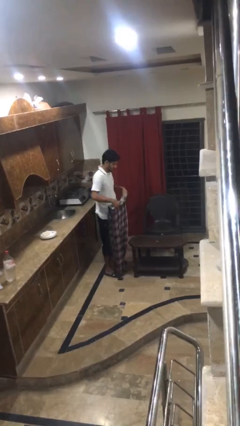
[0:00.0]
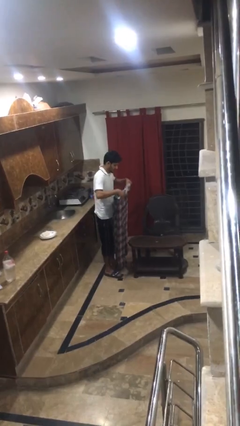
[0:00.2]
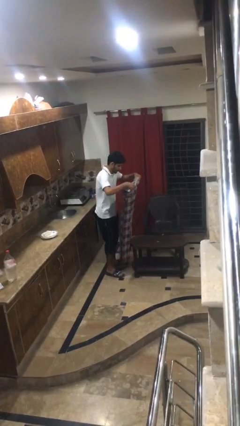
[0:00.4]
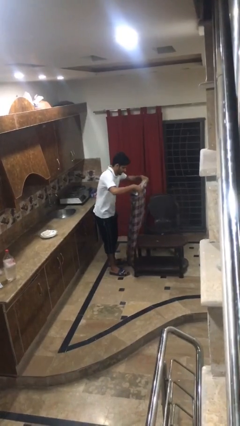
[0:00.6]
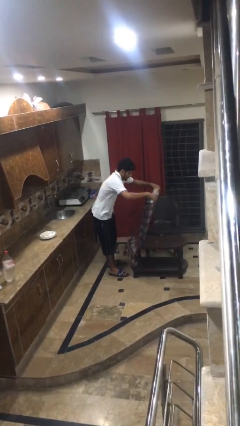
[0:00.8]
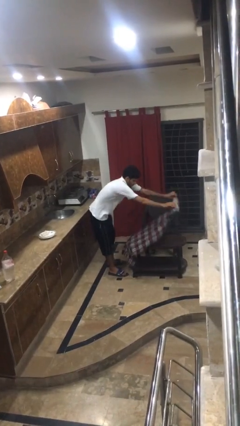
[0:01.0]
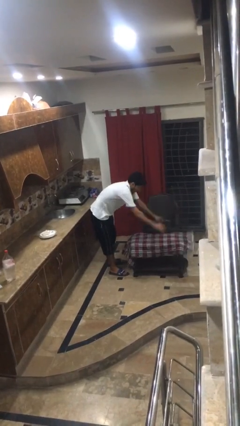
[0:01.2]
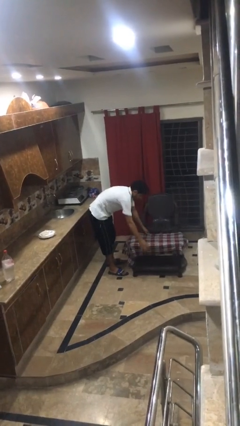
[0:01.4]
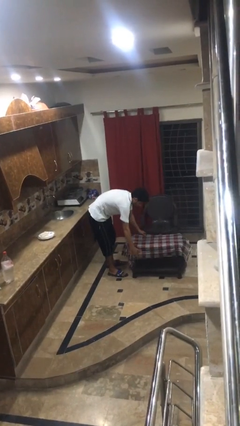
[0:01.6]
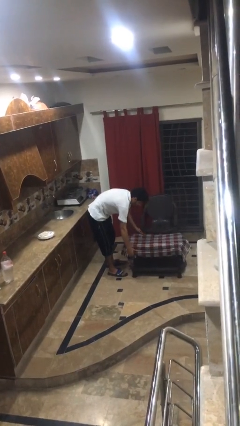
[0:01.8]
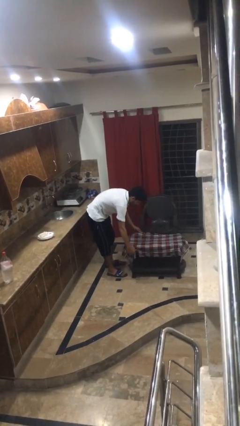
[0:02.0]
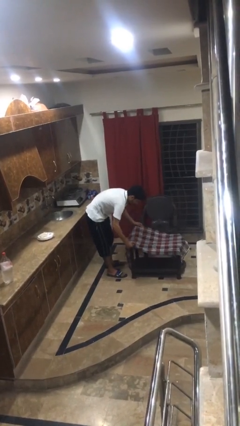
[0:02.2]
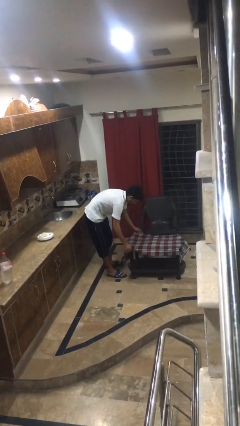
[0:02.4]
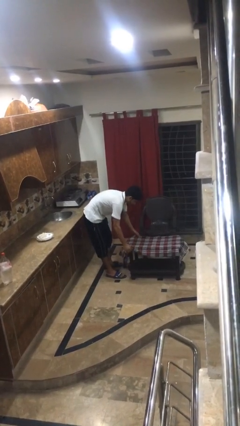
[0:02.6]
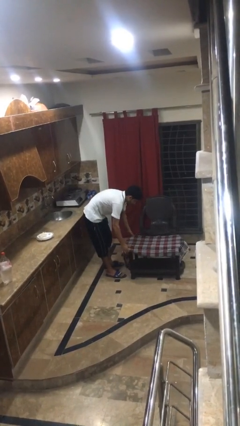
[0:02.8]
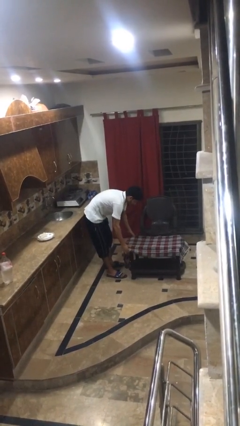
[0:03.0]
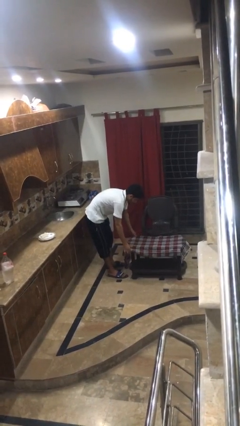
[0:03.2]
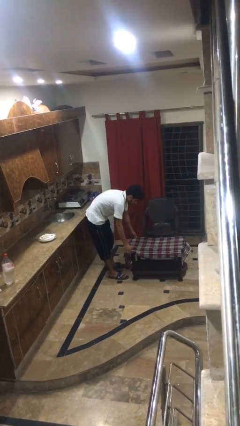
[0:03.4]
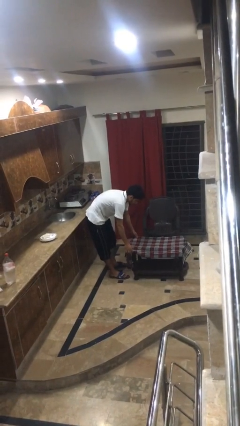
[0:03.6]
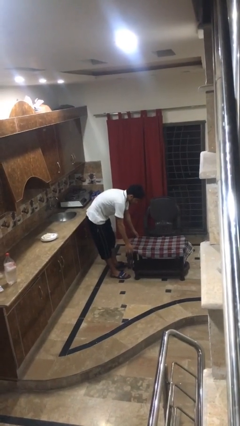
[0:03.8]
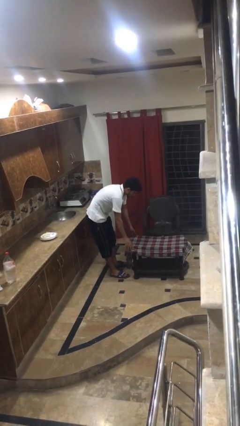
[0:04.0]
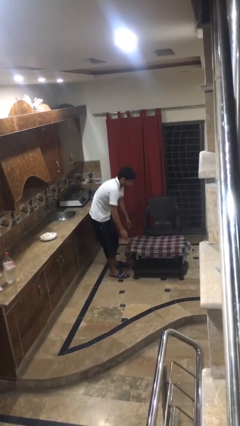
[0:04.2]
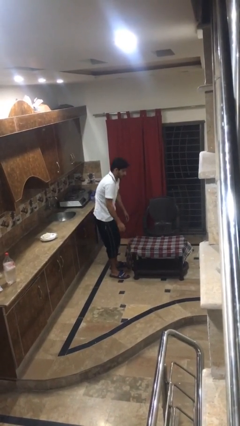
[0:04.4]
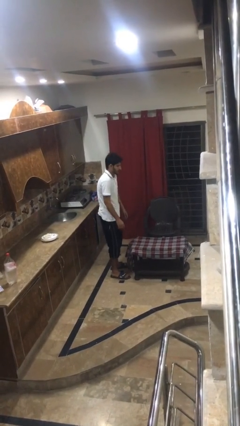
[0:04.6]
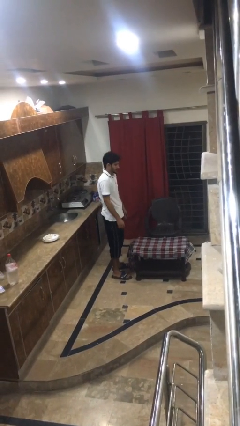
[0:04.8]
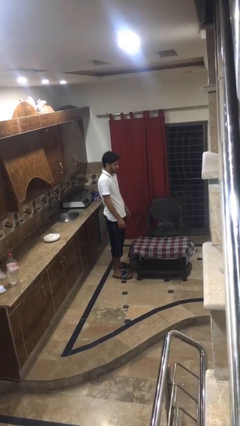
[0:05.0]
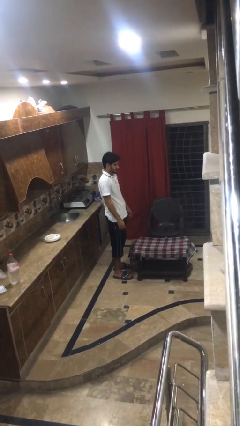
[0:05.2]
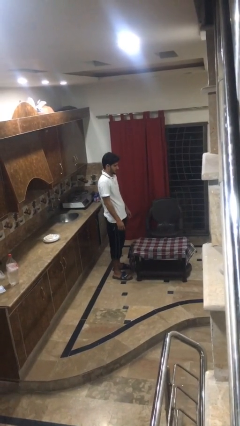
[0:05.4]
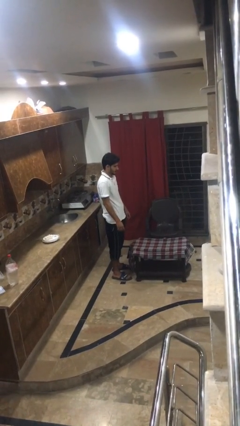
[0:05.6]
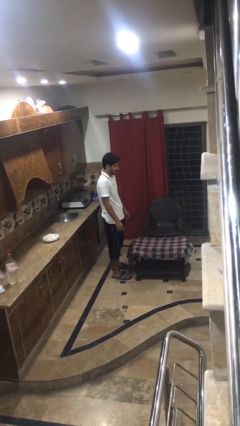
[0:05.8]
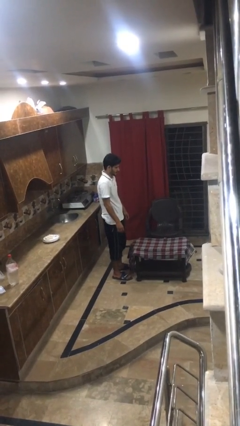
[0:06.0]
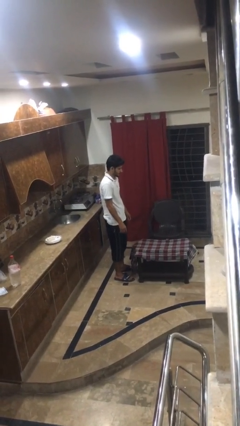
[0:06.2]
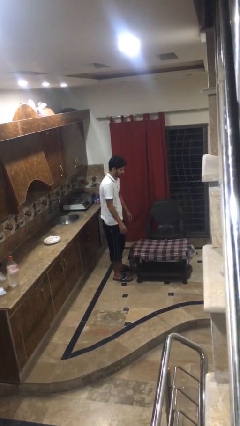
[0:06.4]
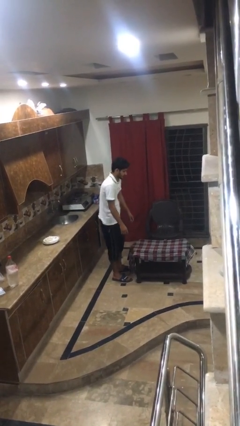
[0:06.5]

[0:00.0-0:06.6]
person spreads tablecloth

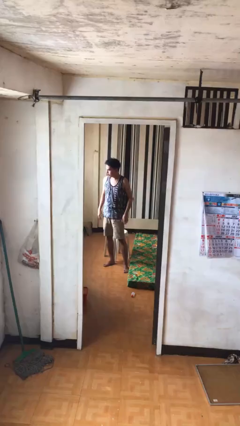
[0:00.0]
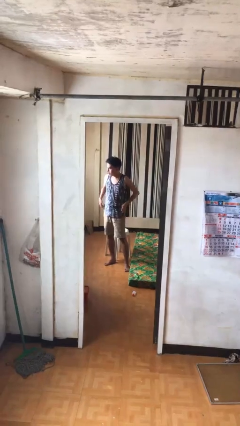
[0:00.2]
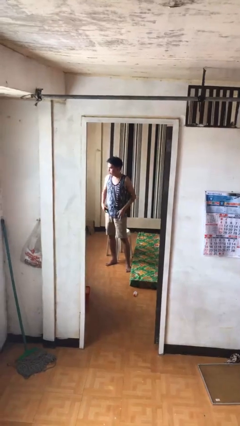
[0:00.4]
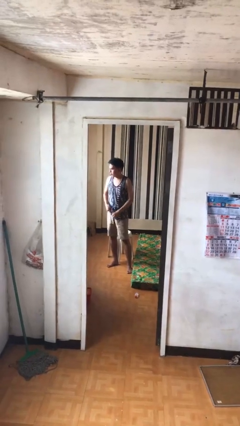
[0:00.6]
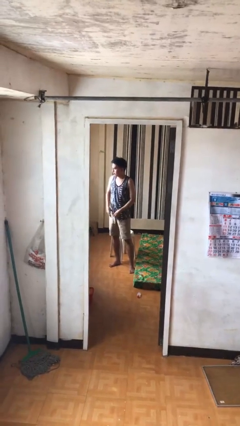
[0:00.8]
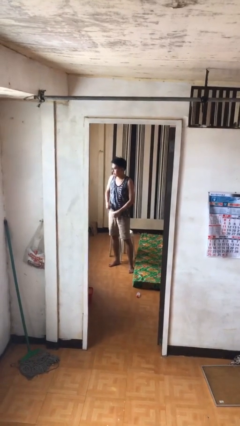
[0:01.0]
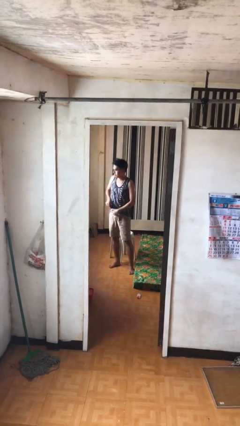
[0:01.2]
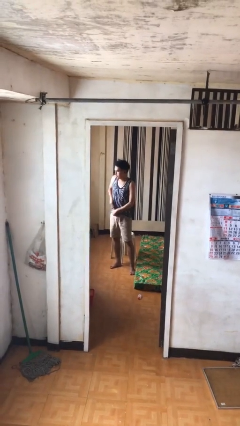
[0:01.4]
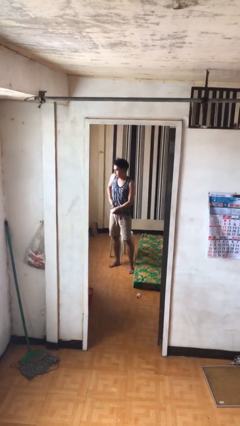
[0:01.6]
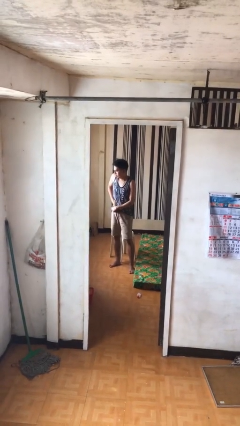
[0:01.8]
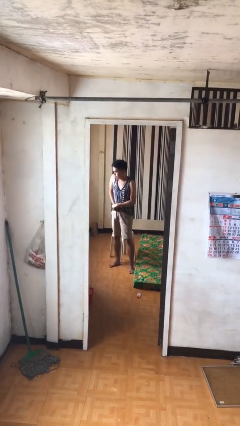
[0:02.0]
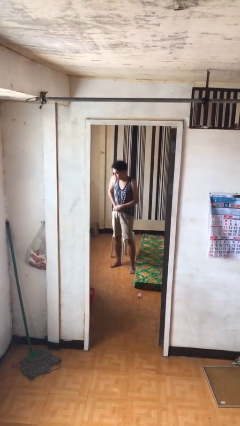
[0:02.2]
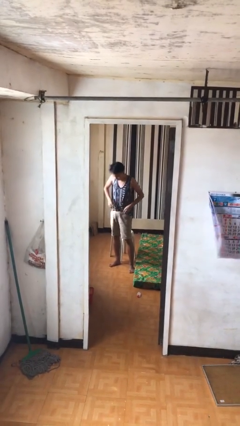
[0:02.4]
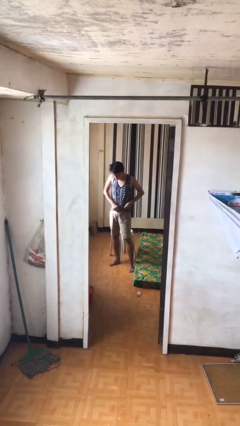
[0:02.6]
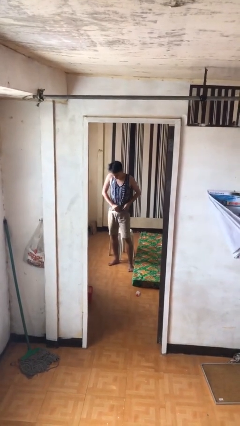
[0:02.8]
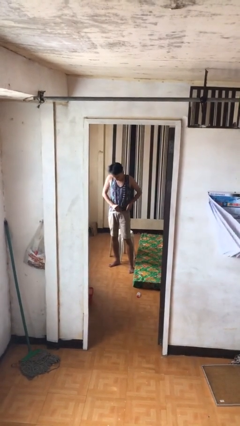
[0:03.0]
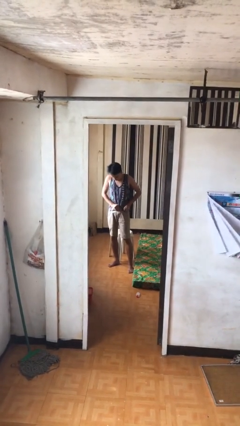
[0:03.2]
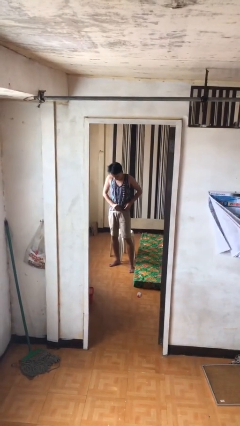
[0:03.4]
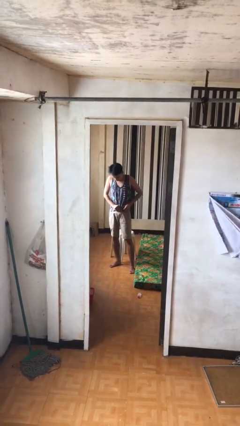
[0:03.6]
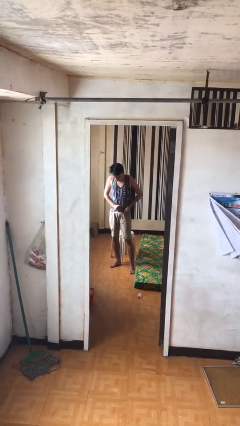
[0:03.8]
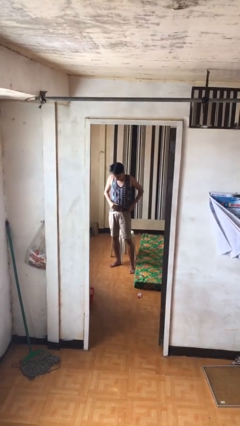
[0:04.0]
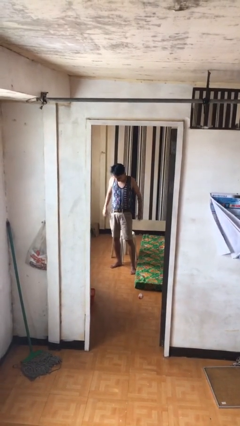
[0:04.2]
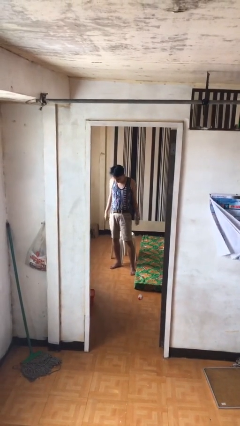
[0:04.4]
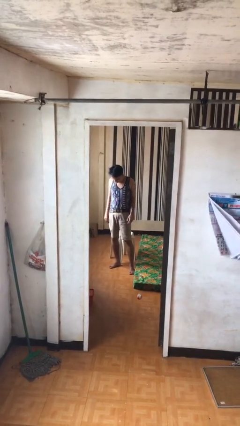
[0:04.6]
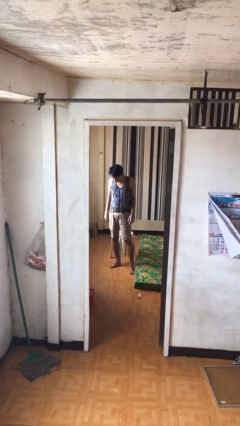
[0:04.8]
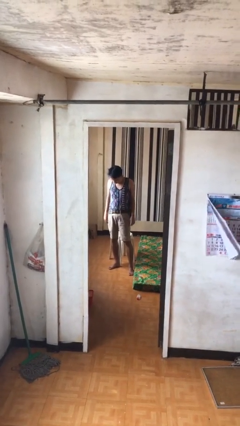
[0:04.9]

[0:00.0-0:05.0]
person tucks in shirt

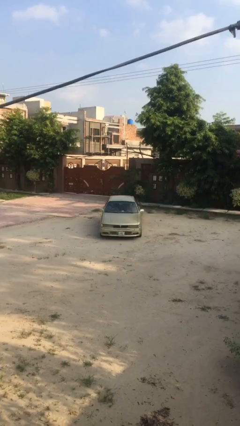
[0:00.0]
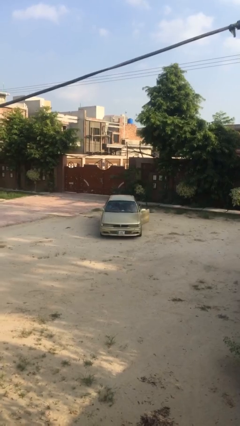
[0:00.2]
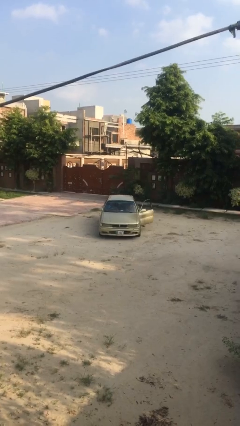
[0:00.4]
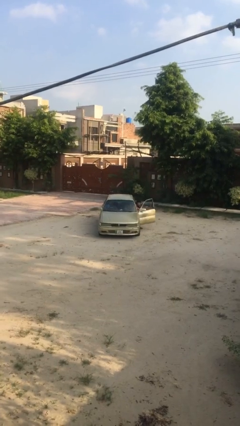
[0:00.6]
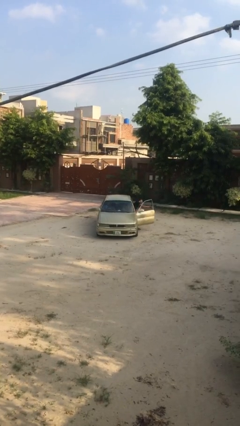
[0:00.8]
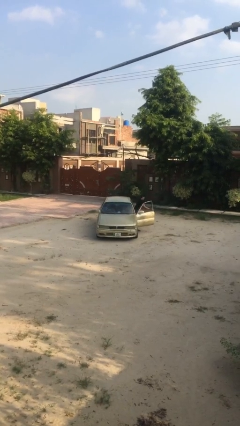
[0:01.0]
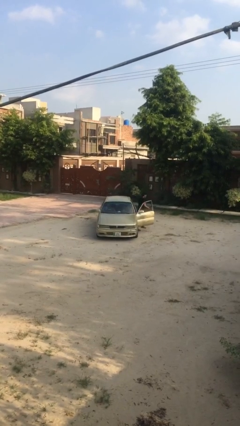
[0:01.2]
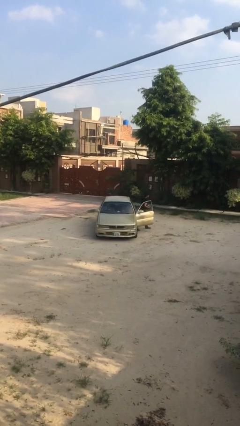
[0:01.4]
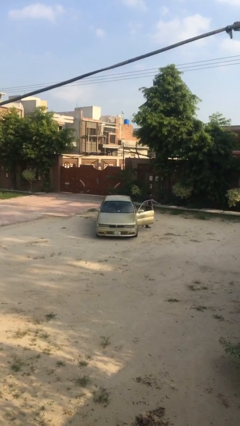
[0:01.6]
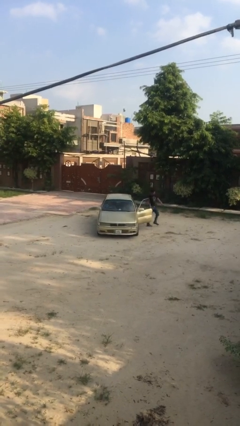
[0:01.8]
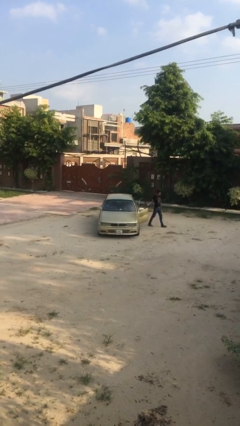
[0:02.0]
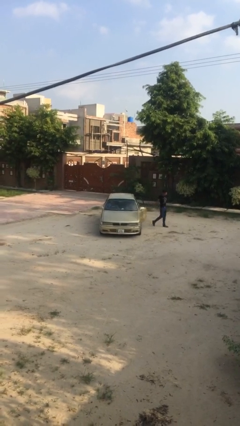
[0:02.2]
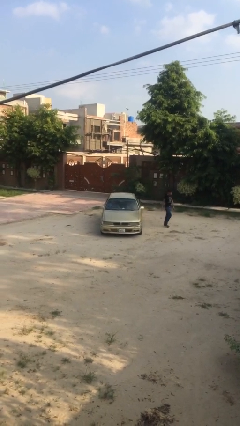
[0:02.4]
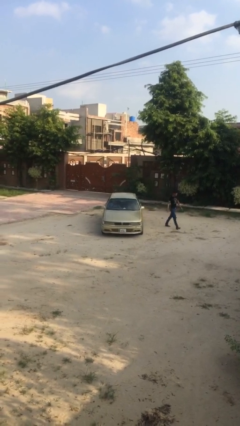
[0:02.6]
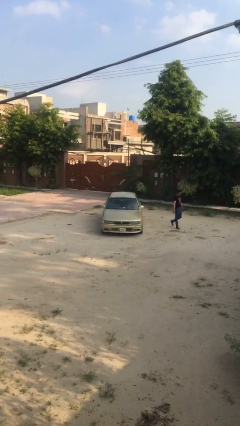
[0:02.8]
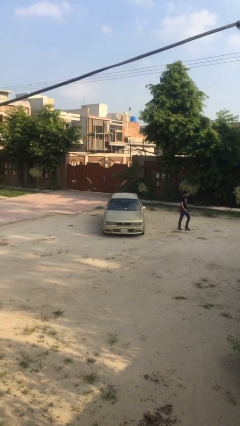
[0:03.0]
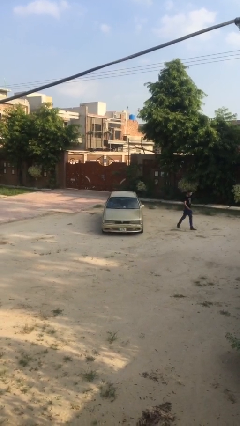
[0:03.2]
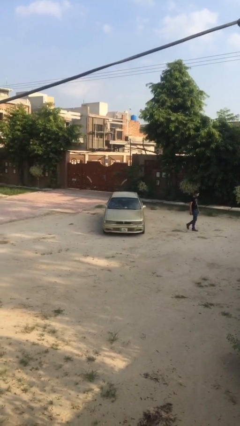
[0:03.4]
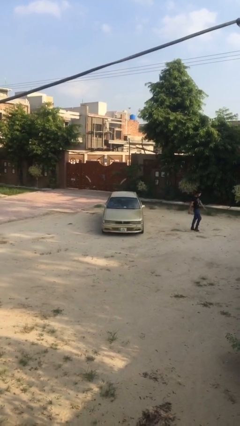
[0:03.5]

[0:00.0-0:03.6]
car drops off person

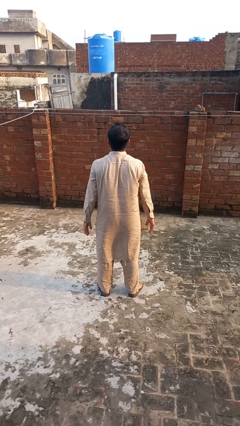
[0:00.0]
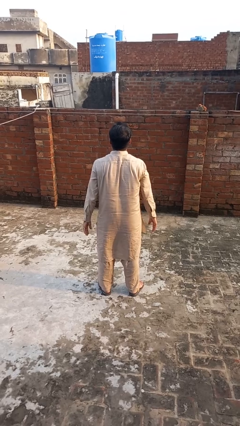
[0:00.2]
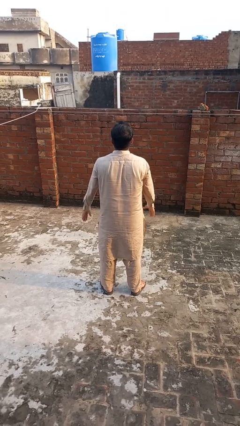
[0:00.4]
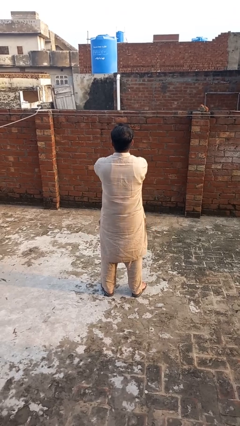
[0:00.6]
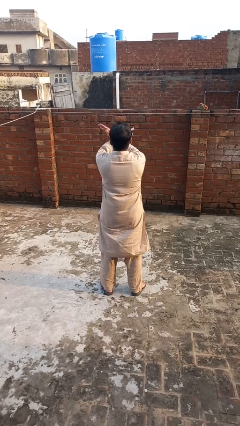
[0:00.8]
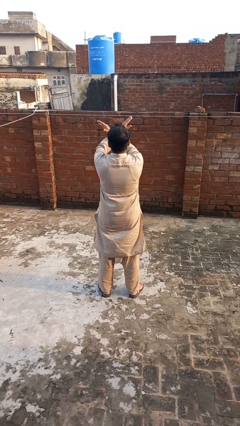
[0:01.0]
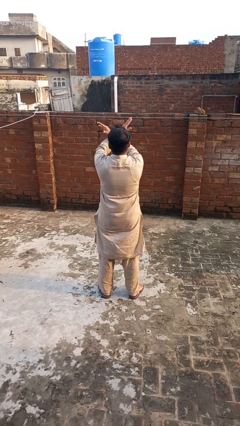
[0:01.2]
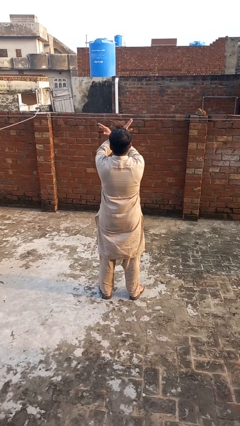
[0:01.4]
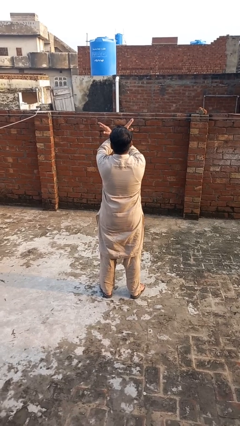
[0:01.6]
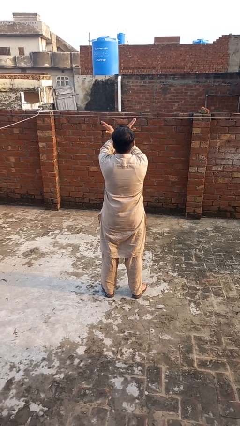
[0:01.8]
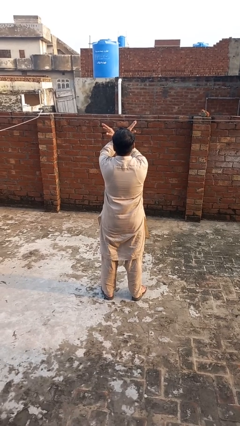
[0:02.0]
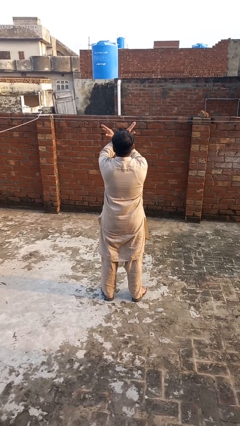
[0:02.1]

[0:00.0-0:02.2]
person gestures arms x

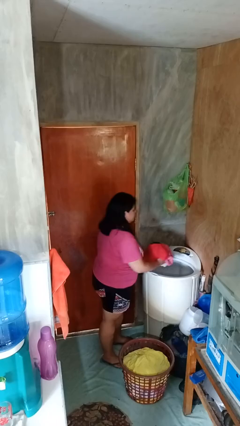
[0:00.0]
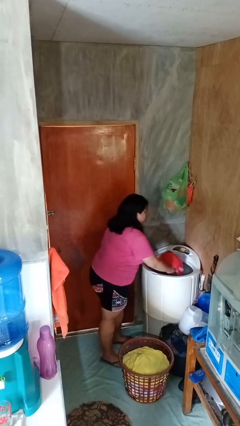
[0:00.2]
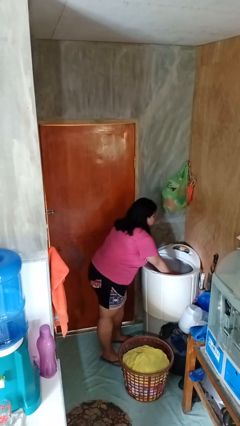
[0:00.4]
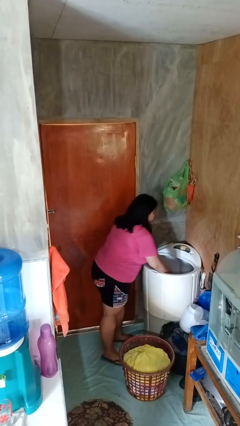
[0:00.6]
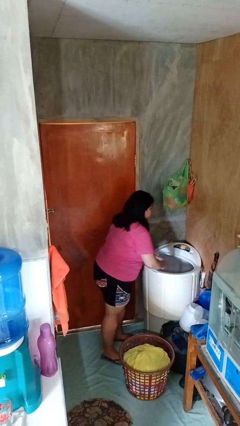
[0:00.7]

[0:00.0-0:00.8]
person loads clotheswasher
